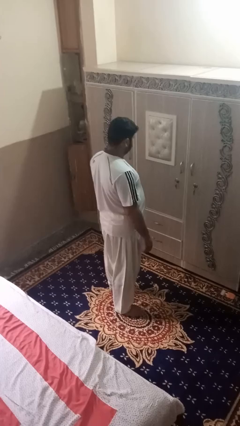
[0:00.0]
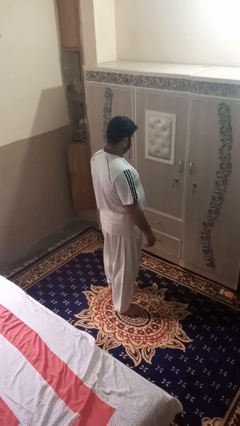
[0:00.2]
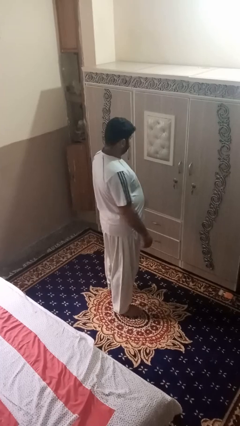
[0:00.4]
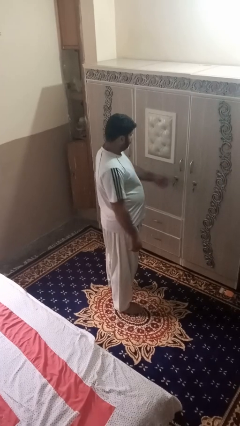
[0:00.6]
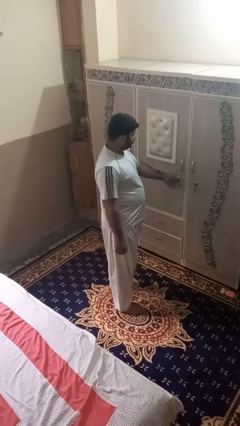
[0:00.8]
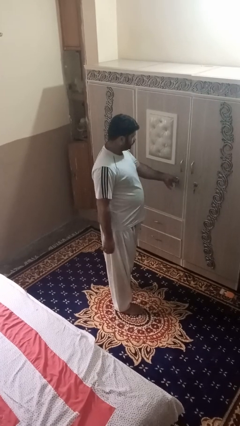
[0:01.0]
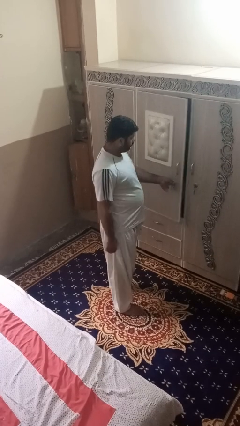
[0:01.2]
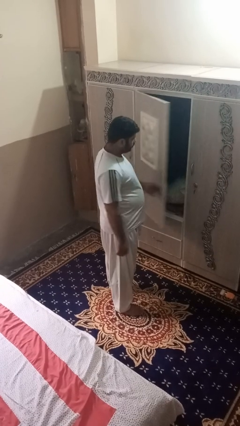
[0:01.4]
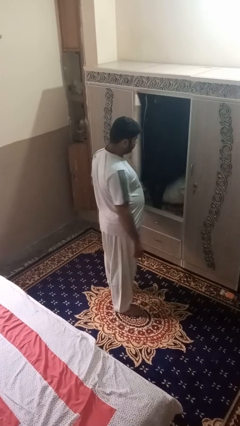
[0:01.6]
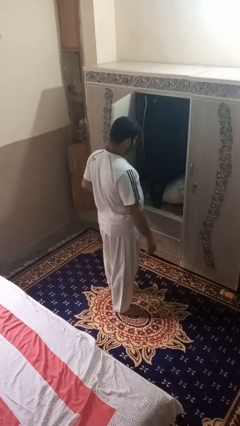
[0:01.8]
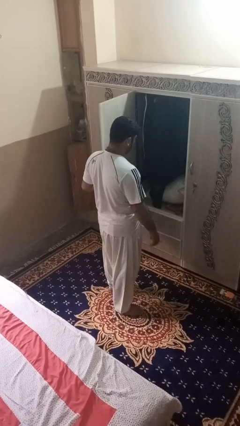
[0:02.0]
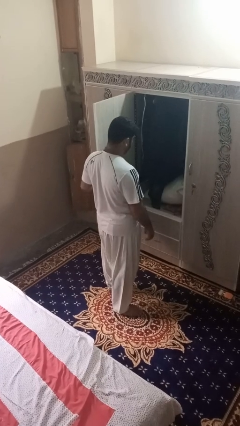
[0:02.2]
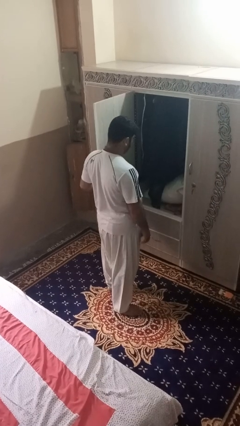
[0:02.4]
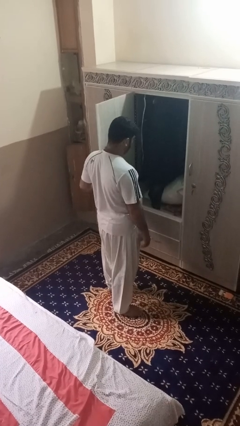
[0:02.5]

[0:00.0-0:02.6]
person opens dresser drawer

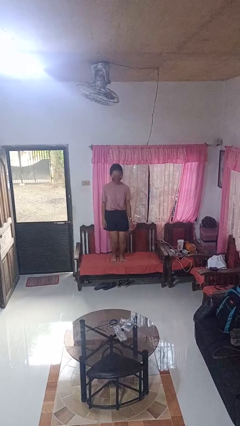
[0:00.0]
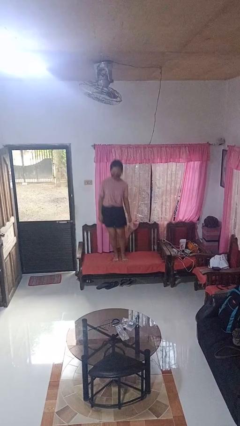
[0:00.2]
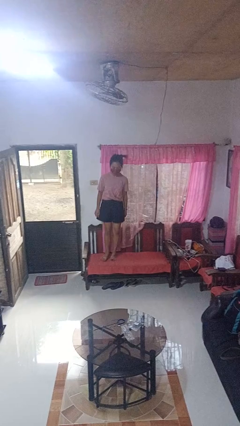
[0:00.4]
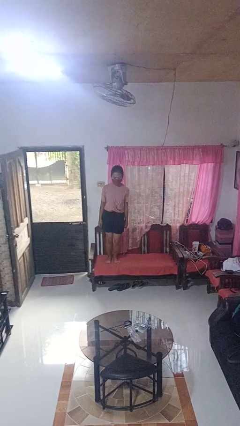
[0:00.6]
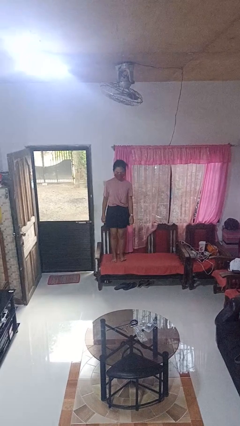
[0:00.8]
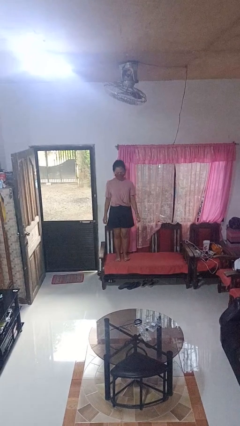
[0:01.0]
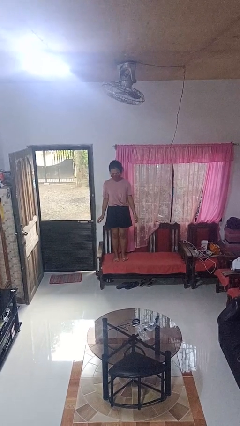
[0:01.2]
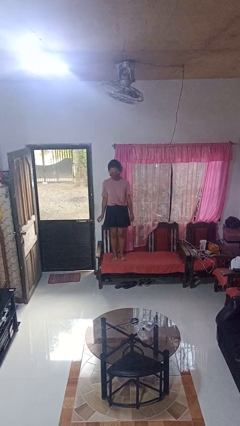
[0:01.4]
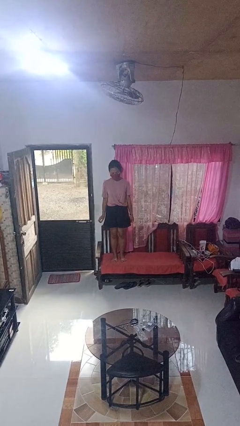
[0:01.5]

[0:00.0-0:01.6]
person jumps on couch

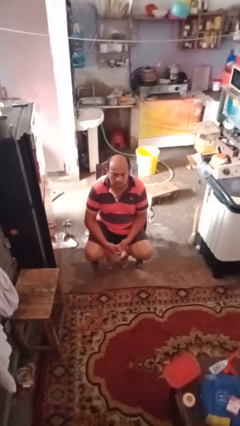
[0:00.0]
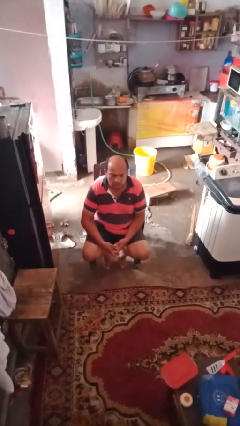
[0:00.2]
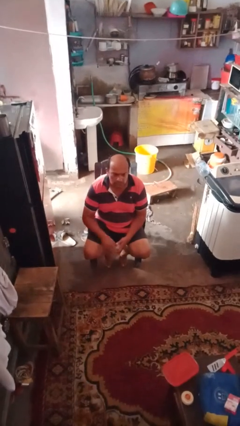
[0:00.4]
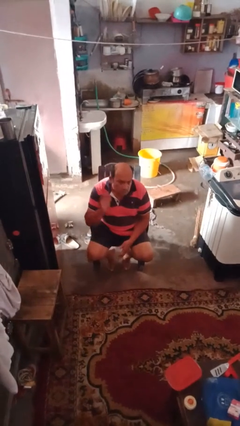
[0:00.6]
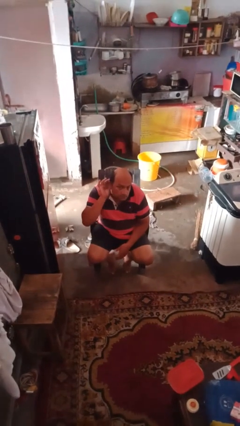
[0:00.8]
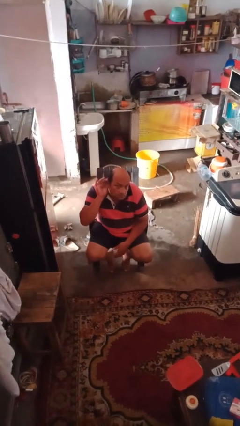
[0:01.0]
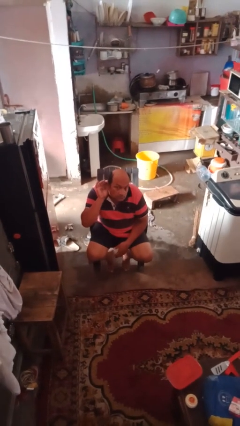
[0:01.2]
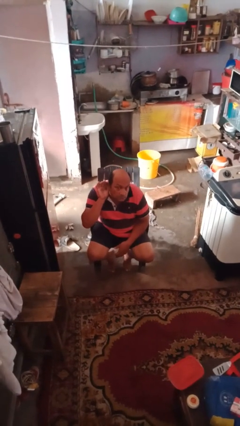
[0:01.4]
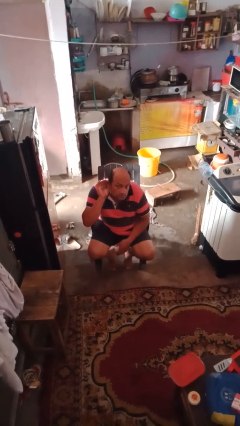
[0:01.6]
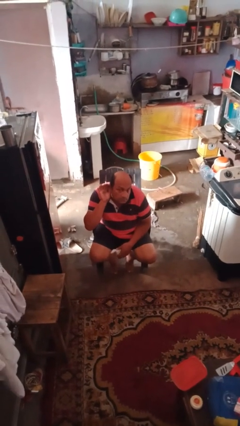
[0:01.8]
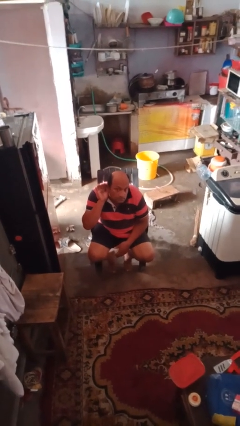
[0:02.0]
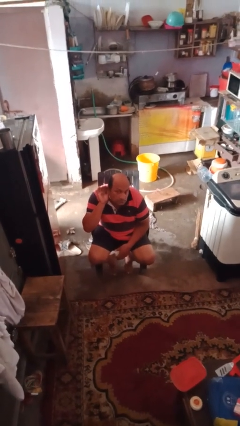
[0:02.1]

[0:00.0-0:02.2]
person gestures listen closely

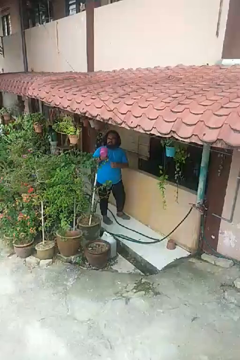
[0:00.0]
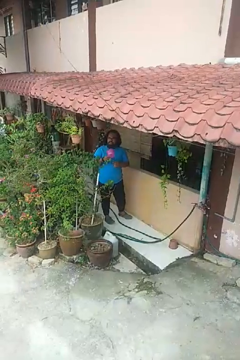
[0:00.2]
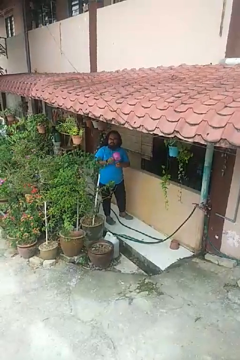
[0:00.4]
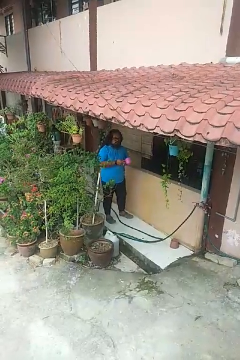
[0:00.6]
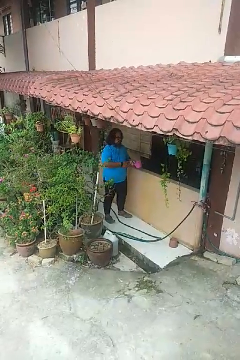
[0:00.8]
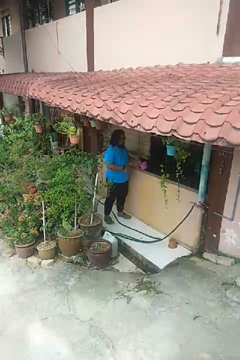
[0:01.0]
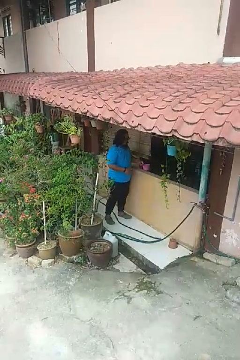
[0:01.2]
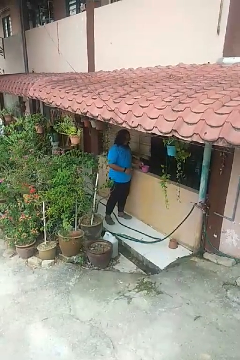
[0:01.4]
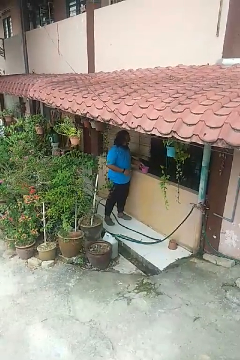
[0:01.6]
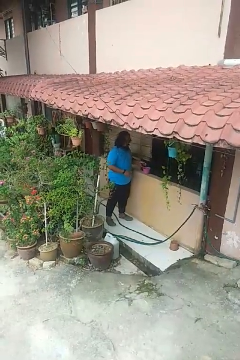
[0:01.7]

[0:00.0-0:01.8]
person puts down object on countertop

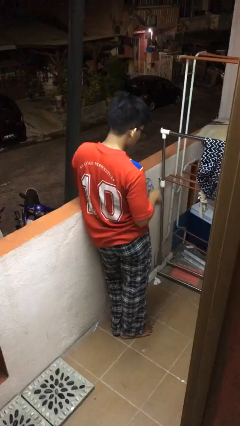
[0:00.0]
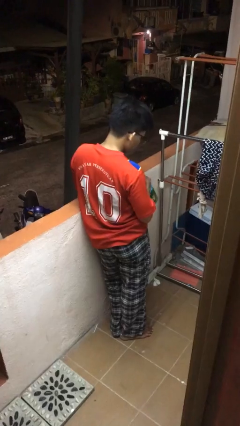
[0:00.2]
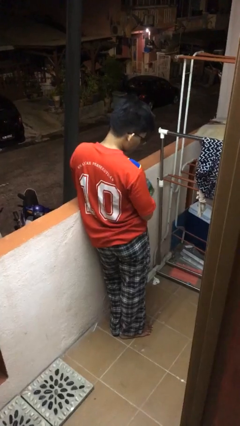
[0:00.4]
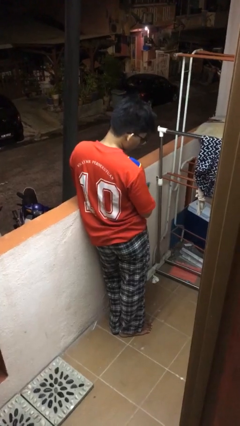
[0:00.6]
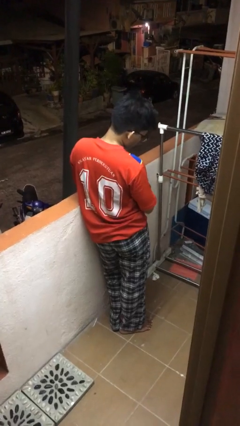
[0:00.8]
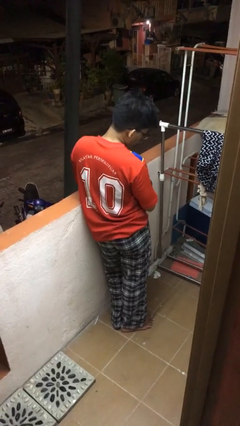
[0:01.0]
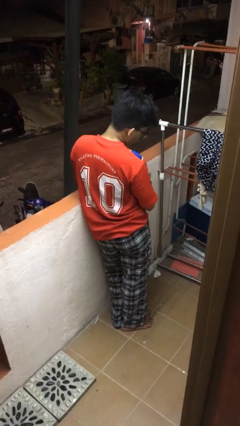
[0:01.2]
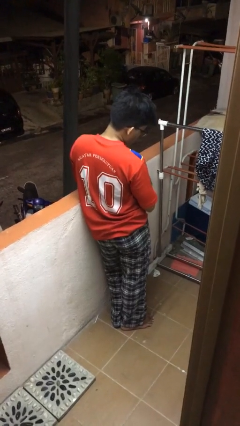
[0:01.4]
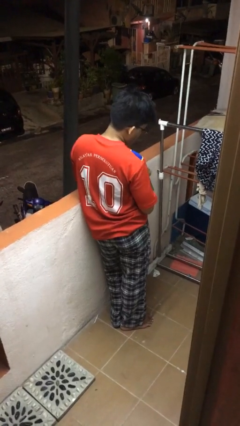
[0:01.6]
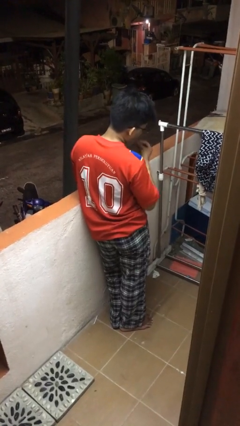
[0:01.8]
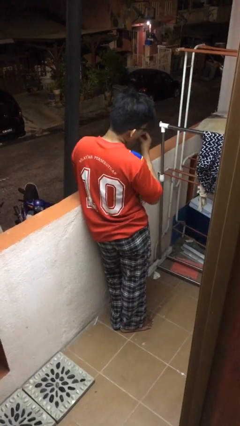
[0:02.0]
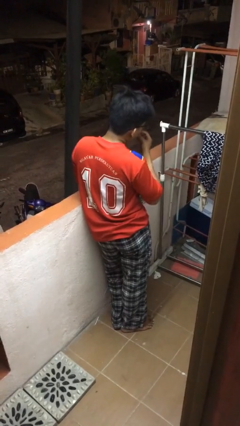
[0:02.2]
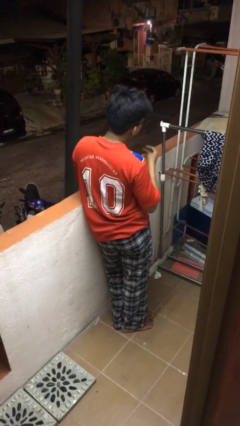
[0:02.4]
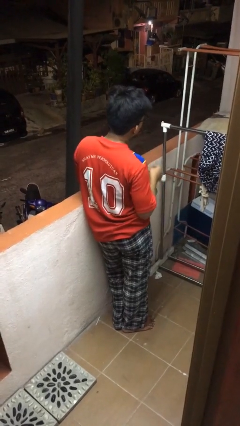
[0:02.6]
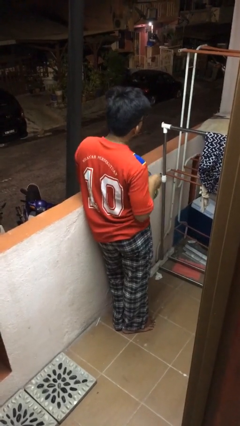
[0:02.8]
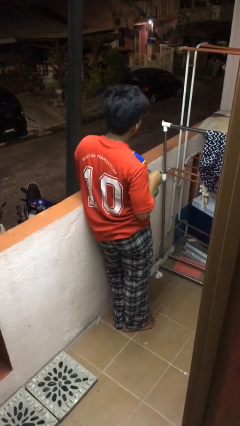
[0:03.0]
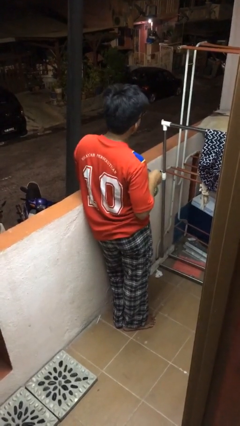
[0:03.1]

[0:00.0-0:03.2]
person eats snack from bag

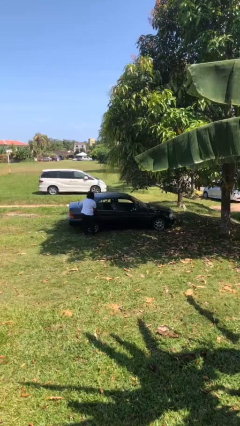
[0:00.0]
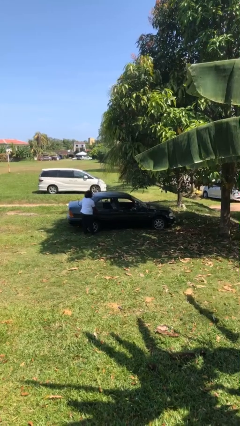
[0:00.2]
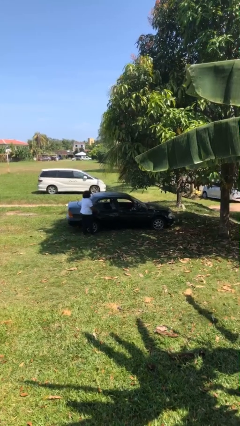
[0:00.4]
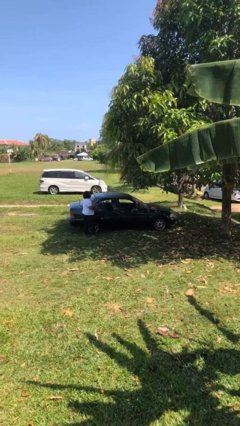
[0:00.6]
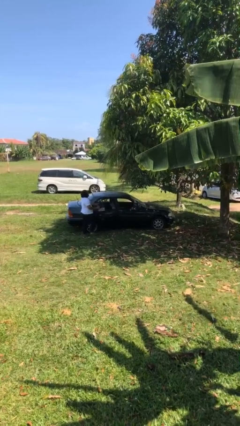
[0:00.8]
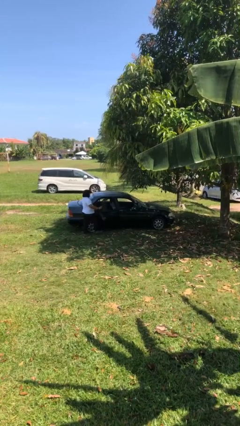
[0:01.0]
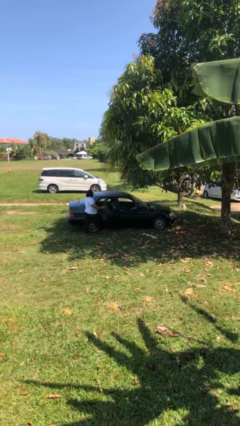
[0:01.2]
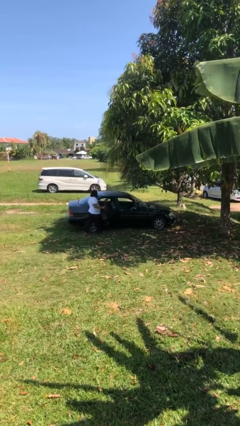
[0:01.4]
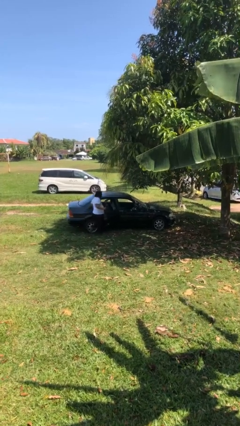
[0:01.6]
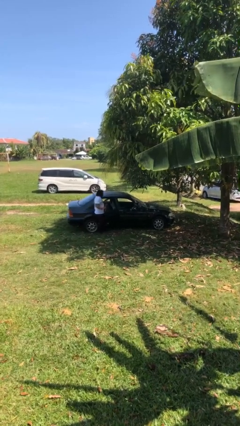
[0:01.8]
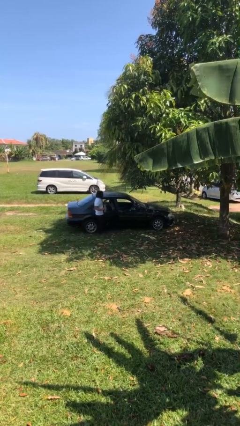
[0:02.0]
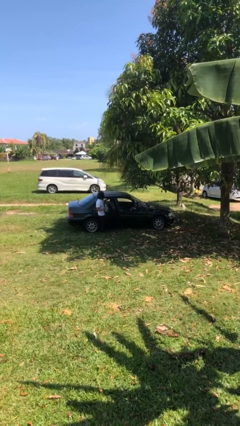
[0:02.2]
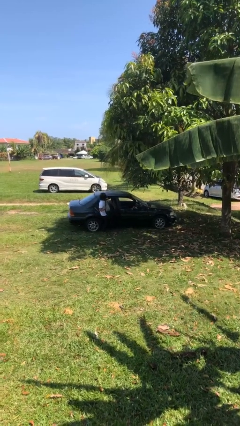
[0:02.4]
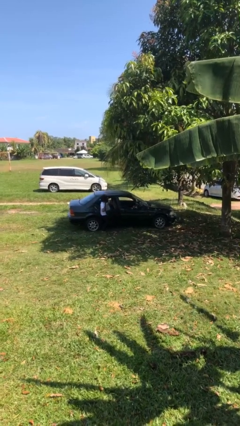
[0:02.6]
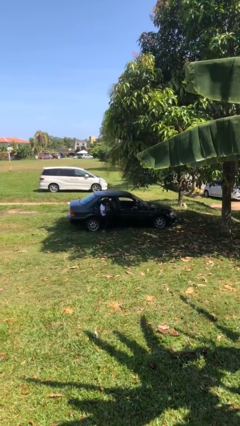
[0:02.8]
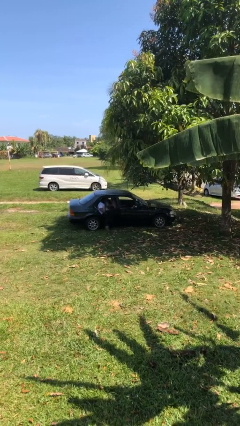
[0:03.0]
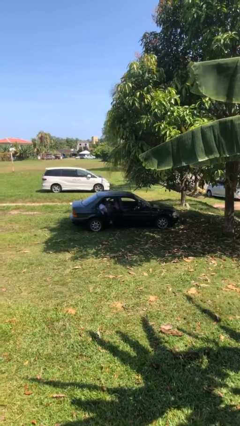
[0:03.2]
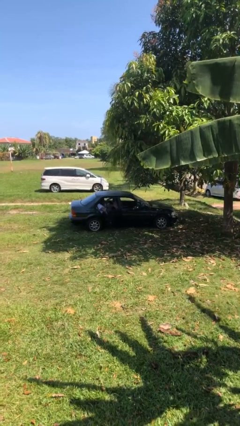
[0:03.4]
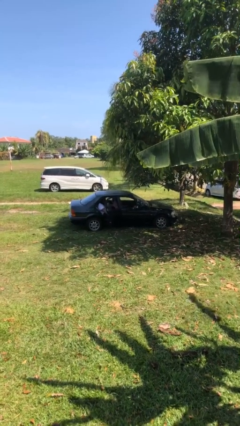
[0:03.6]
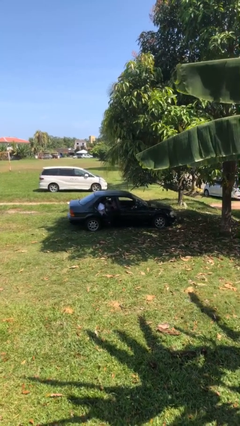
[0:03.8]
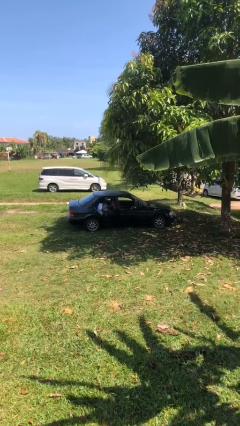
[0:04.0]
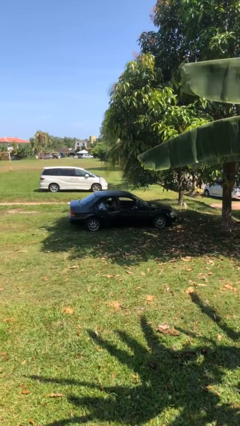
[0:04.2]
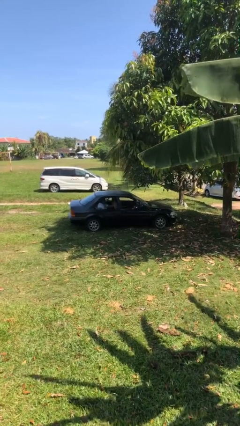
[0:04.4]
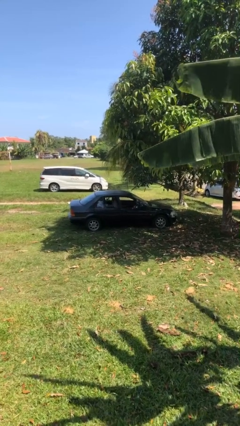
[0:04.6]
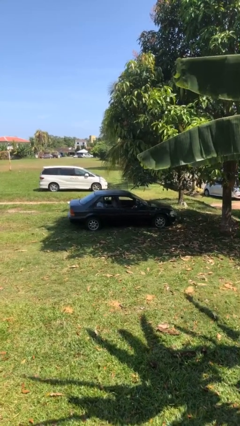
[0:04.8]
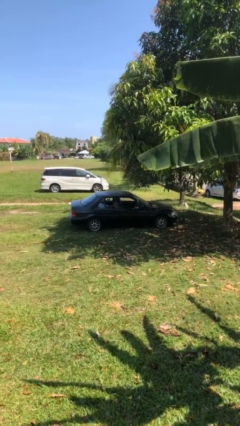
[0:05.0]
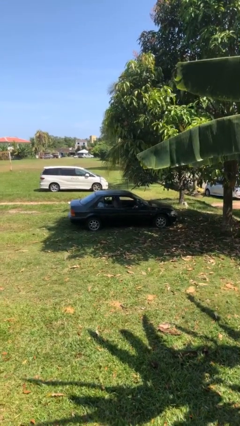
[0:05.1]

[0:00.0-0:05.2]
car picks up person

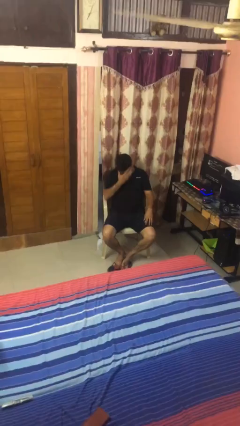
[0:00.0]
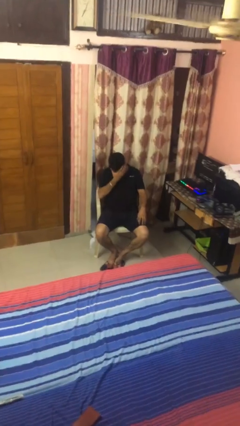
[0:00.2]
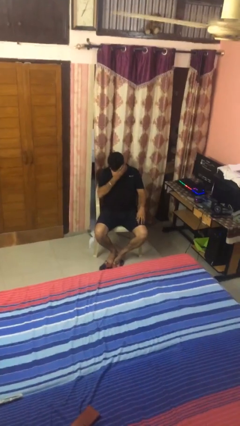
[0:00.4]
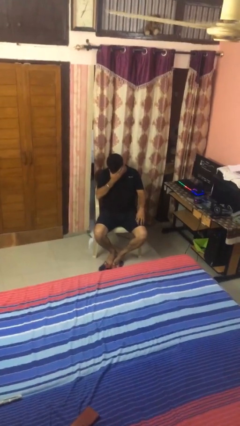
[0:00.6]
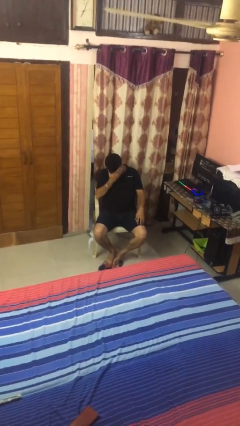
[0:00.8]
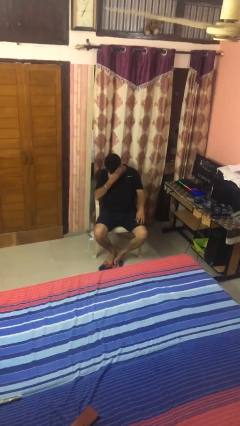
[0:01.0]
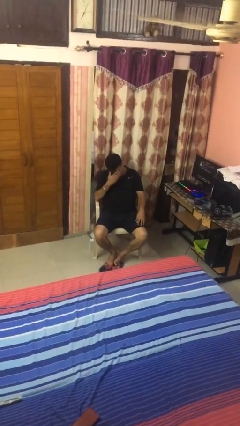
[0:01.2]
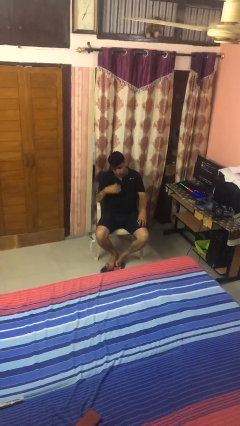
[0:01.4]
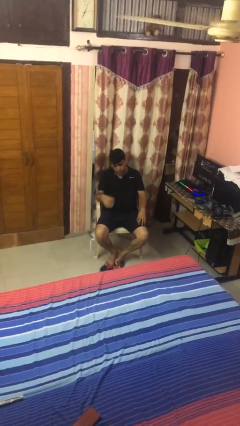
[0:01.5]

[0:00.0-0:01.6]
person covers face with hands
